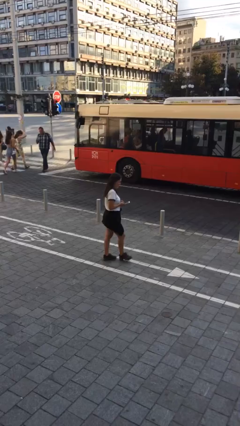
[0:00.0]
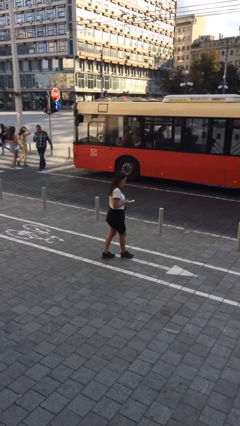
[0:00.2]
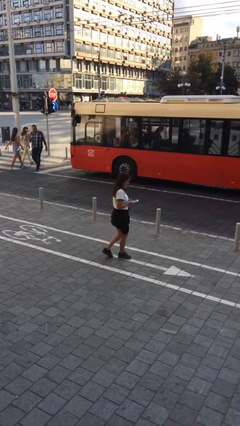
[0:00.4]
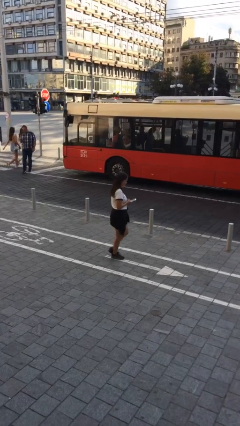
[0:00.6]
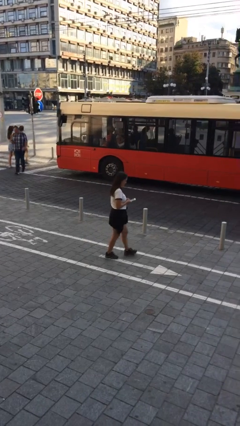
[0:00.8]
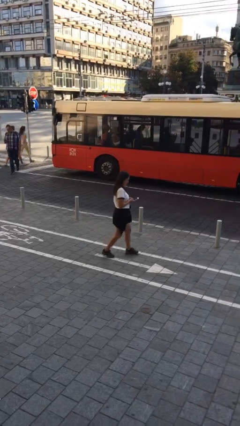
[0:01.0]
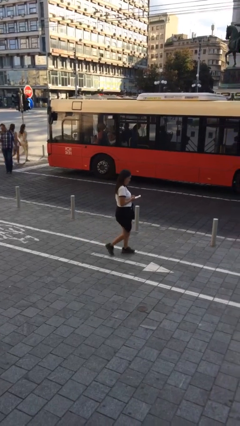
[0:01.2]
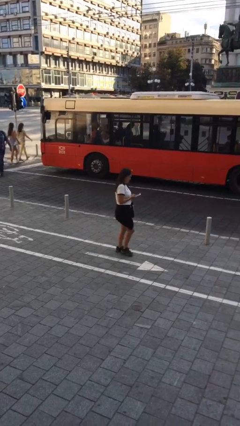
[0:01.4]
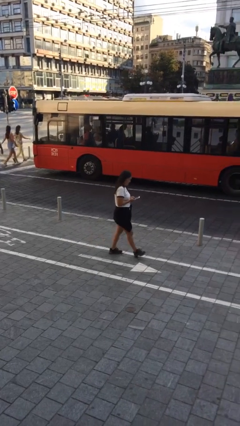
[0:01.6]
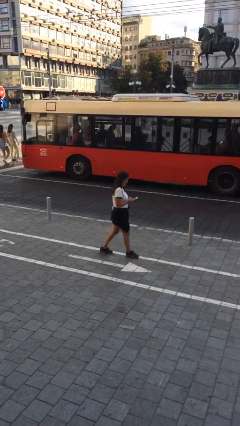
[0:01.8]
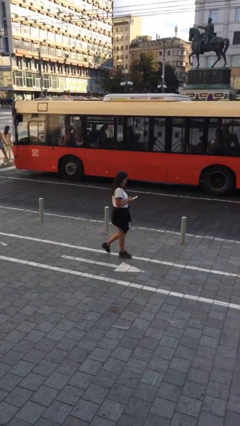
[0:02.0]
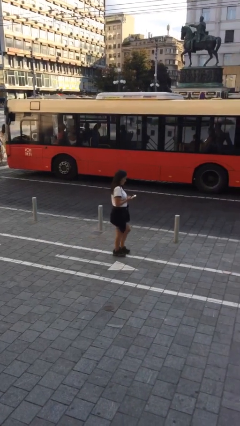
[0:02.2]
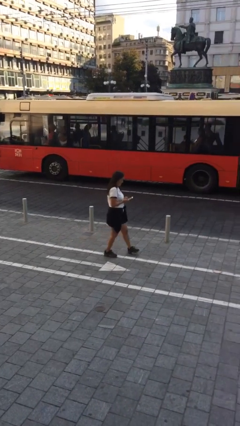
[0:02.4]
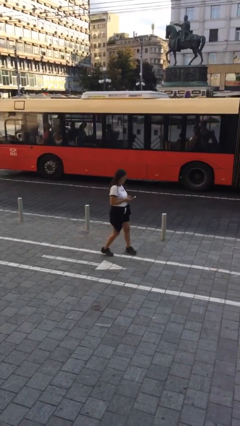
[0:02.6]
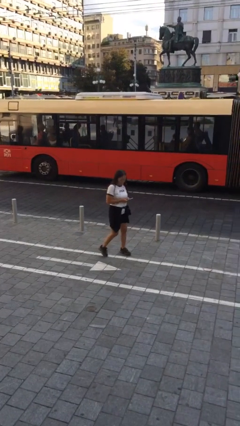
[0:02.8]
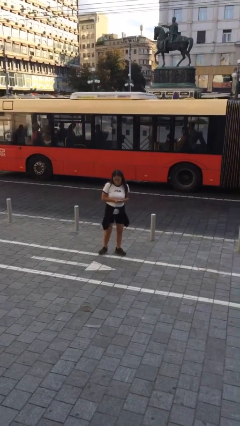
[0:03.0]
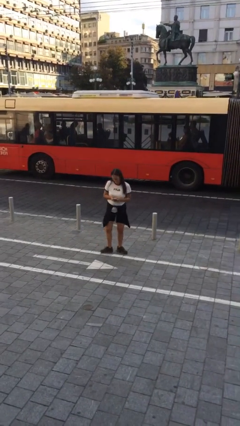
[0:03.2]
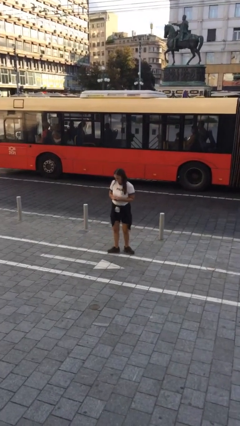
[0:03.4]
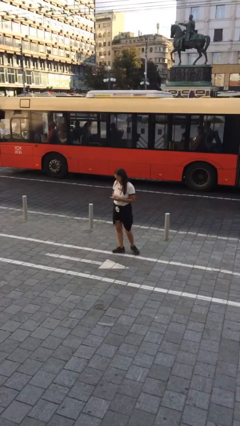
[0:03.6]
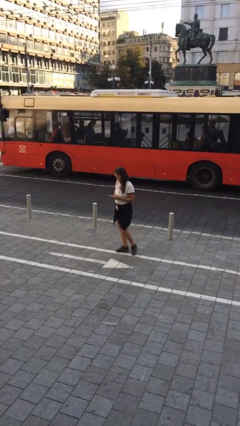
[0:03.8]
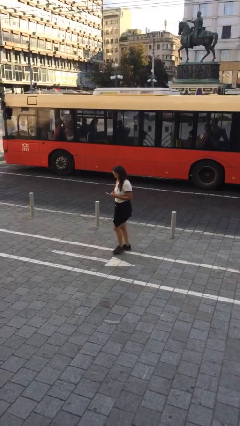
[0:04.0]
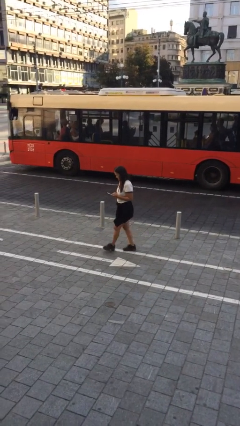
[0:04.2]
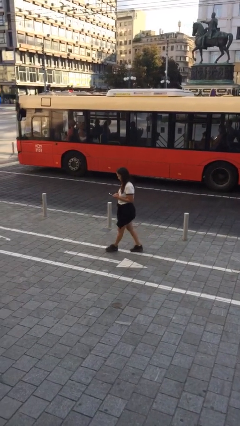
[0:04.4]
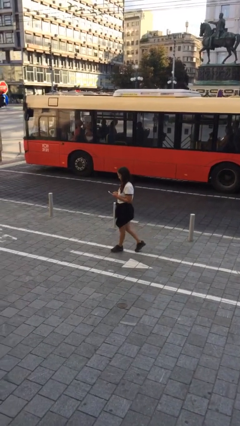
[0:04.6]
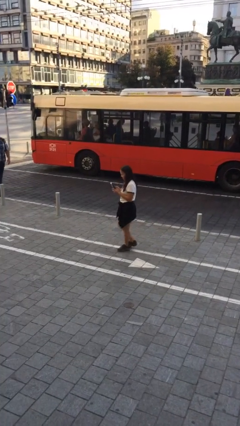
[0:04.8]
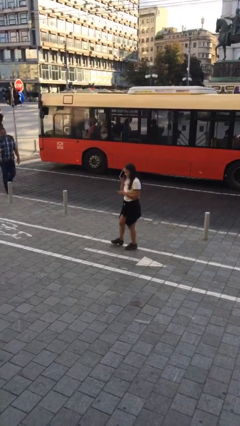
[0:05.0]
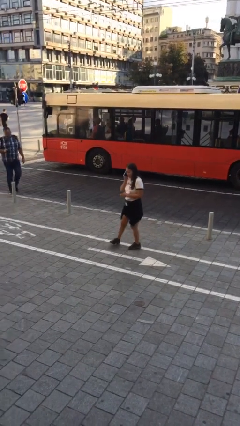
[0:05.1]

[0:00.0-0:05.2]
person texts on phone

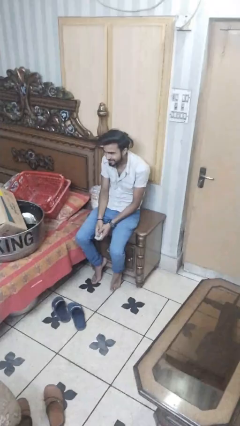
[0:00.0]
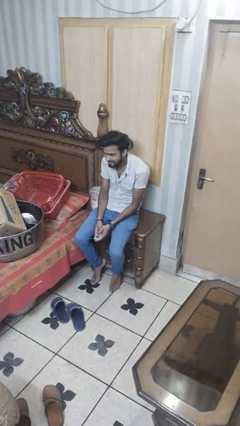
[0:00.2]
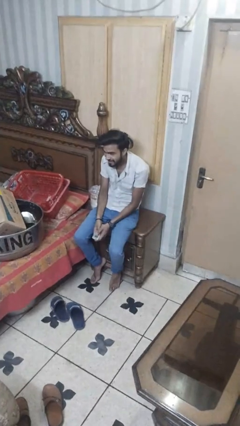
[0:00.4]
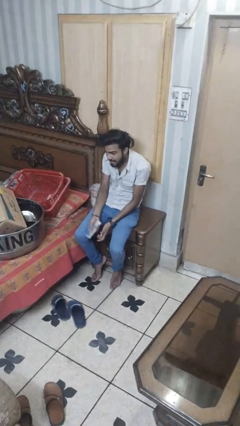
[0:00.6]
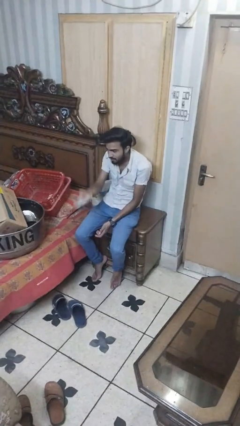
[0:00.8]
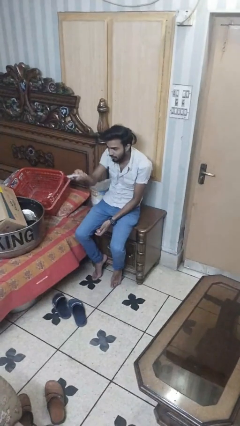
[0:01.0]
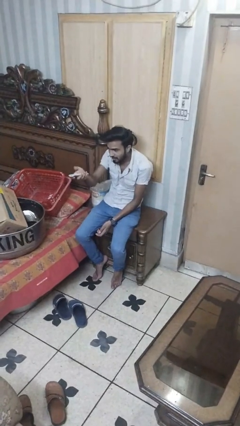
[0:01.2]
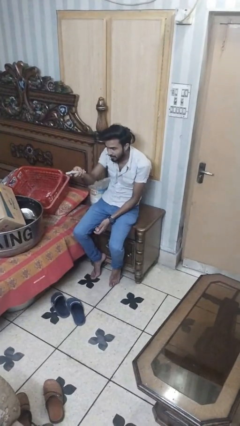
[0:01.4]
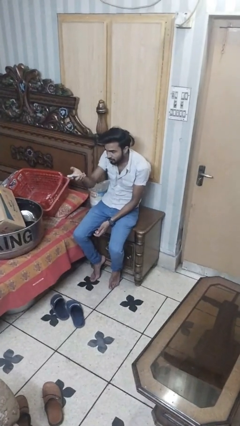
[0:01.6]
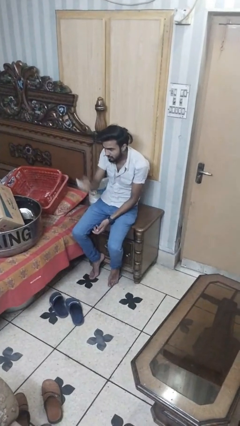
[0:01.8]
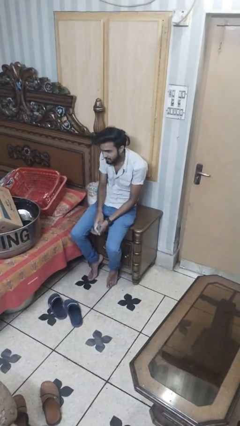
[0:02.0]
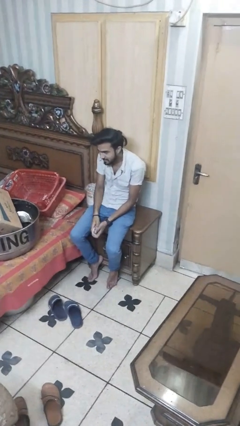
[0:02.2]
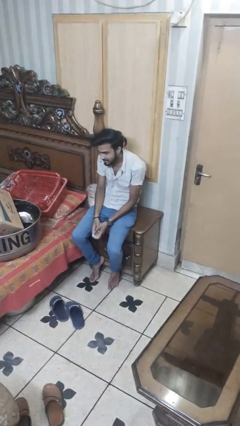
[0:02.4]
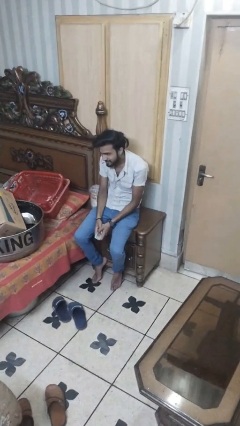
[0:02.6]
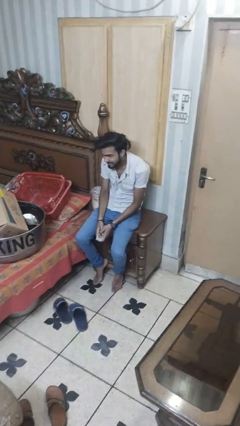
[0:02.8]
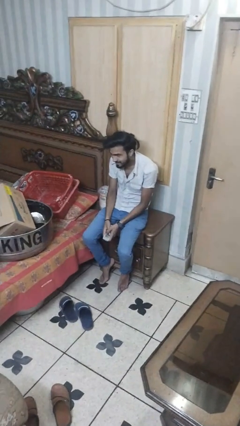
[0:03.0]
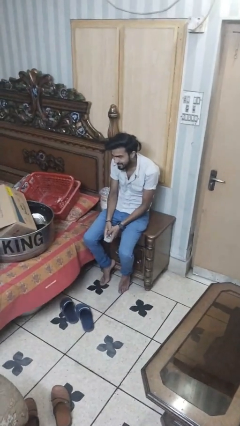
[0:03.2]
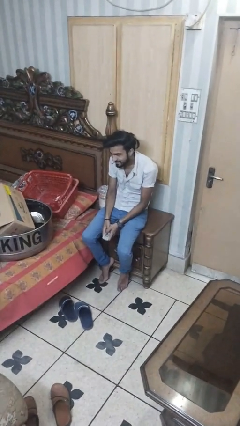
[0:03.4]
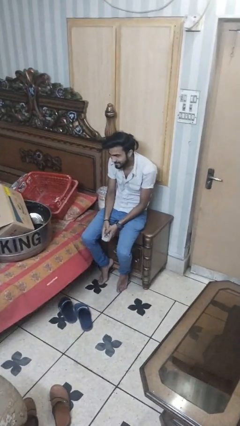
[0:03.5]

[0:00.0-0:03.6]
person uses television remote

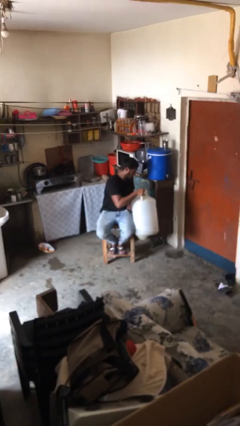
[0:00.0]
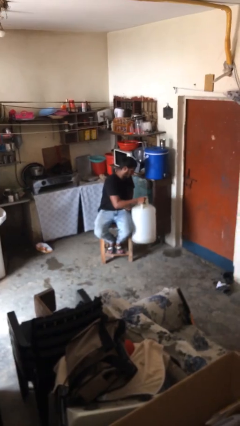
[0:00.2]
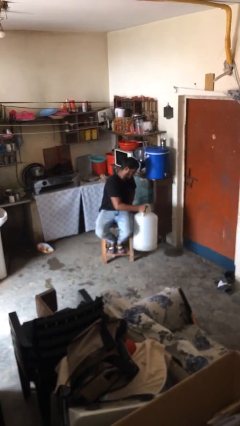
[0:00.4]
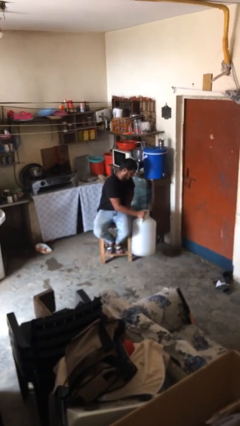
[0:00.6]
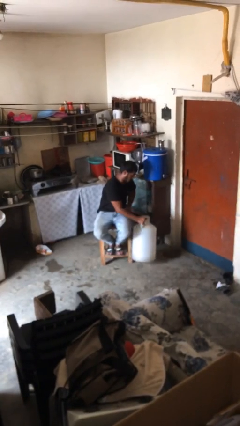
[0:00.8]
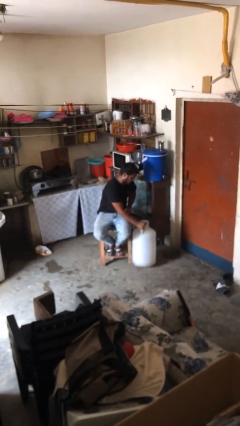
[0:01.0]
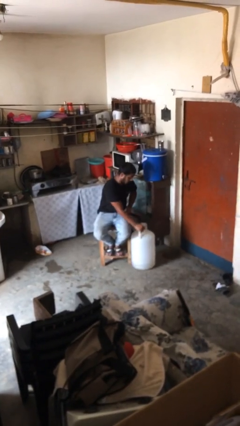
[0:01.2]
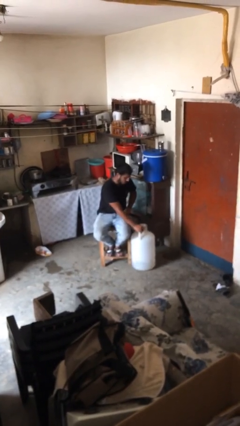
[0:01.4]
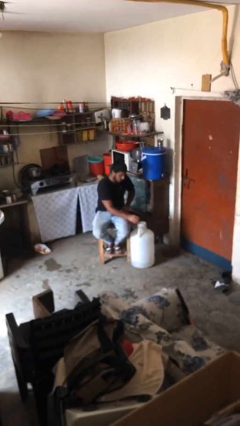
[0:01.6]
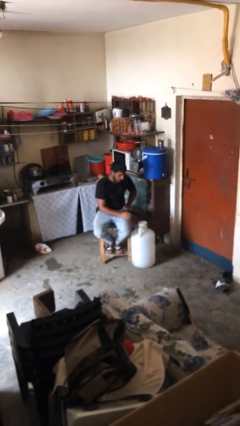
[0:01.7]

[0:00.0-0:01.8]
person puts down object on floor

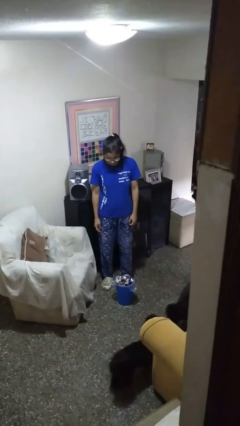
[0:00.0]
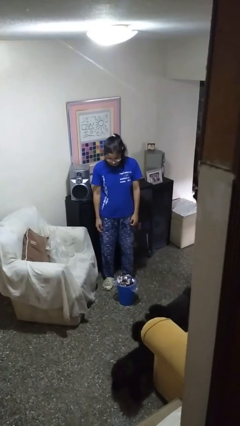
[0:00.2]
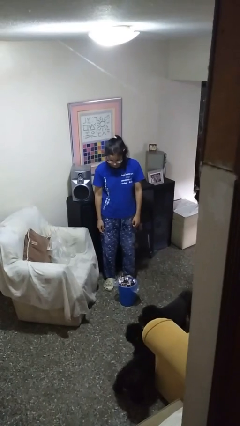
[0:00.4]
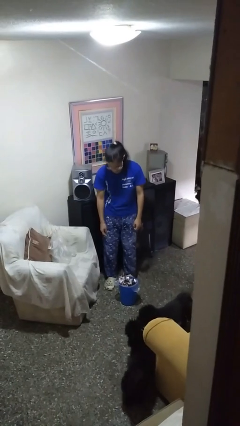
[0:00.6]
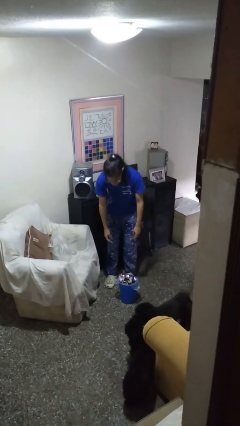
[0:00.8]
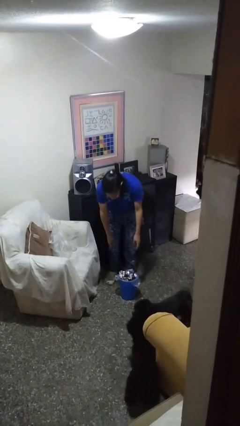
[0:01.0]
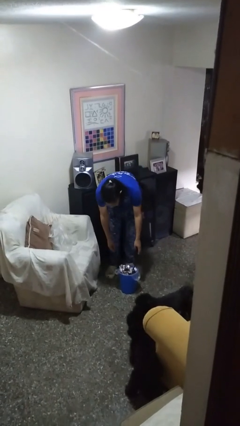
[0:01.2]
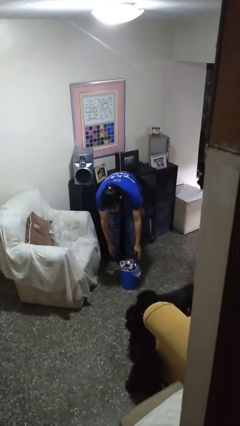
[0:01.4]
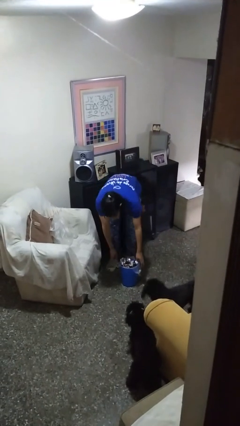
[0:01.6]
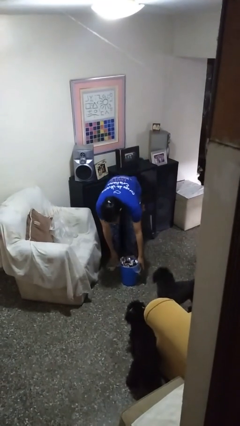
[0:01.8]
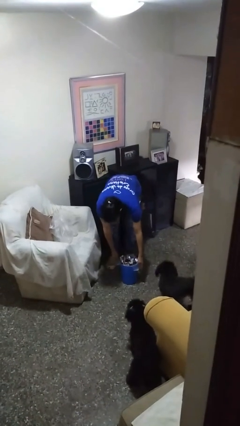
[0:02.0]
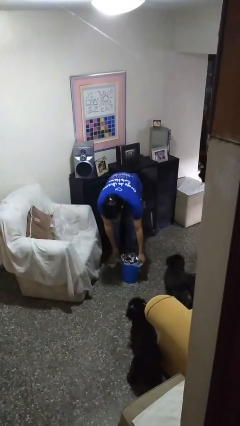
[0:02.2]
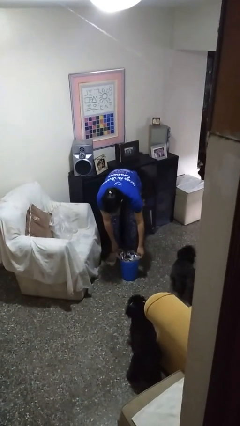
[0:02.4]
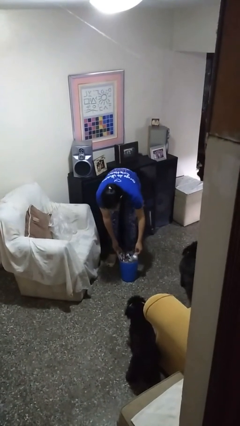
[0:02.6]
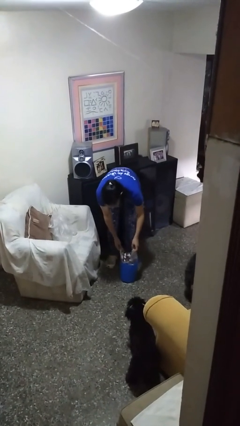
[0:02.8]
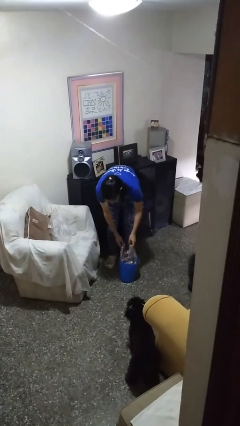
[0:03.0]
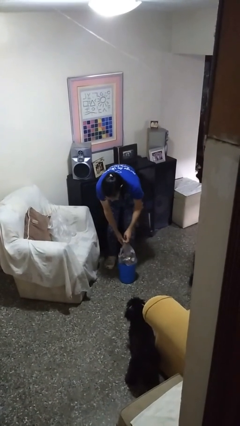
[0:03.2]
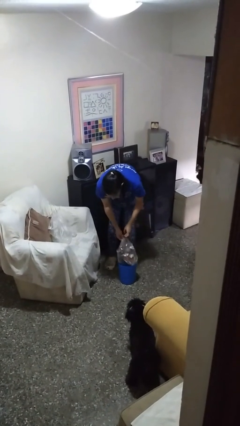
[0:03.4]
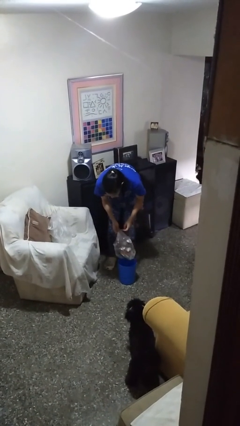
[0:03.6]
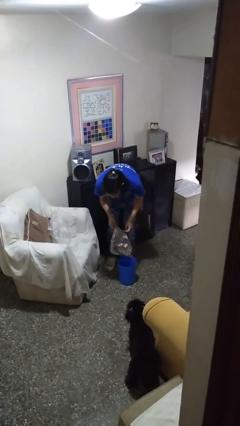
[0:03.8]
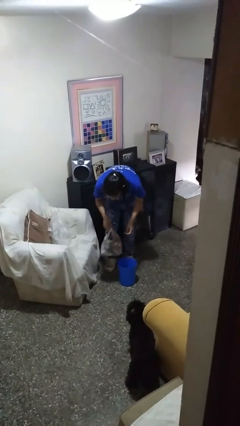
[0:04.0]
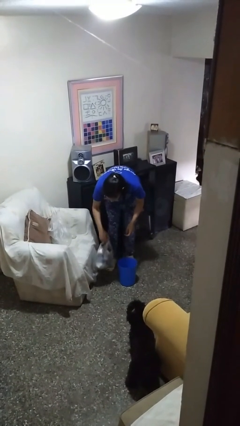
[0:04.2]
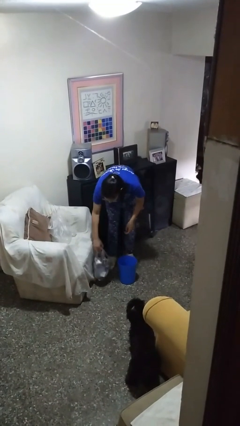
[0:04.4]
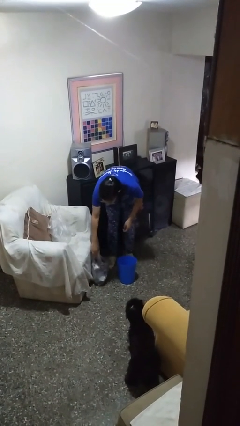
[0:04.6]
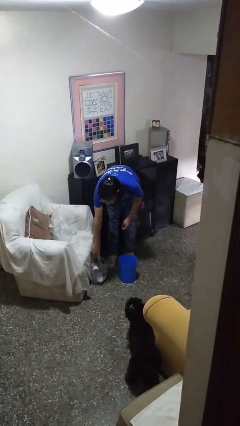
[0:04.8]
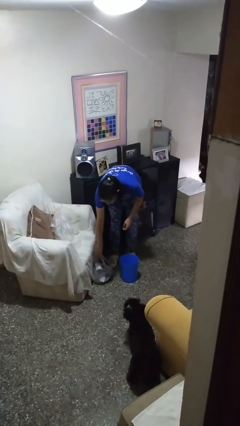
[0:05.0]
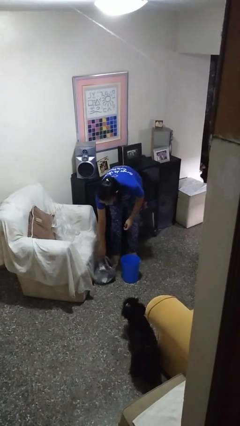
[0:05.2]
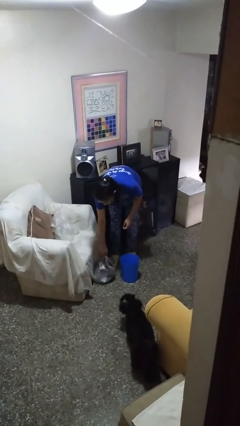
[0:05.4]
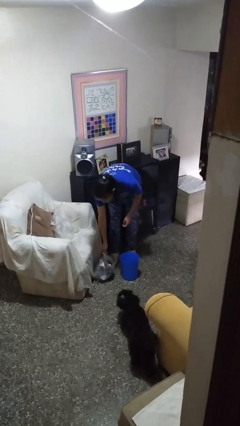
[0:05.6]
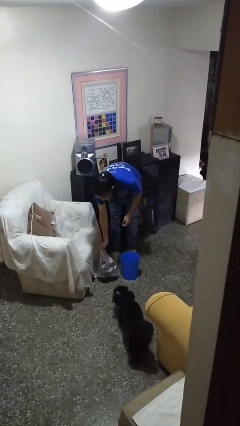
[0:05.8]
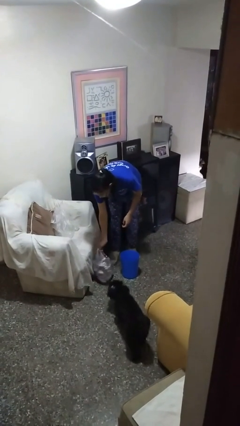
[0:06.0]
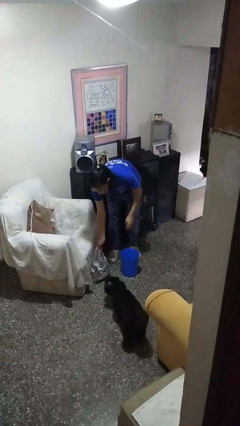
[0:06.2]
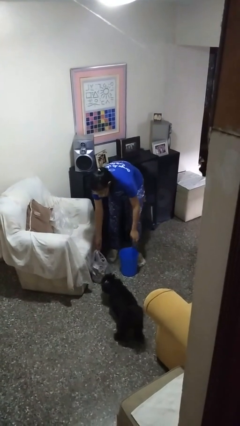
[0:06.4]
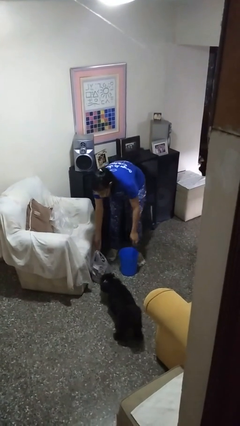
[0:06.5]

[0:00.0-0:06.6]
person removes trashbag from trashcan

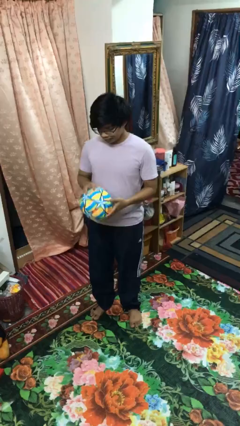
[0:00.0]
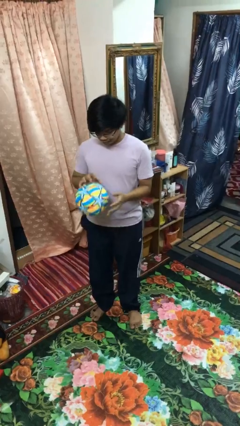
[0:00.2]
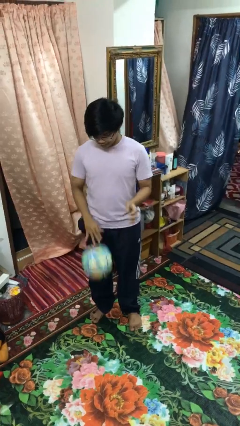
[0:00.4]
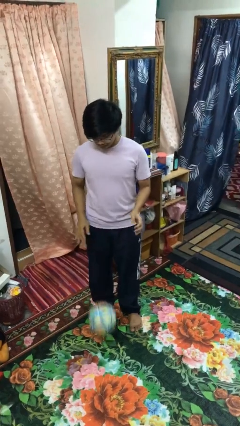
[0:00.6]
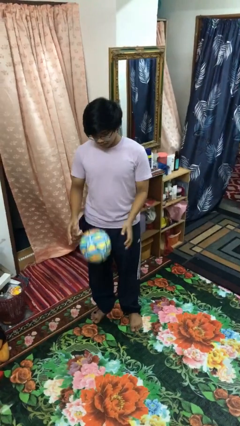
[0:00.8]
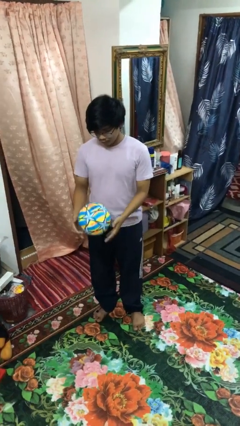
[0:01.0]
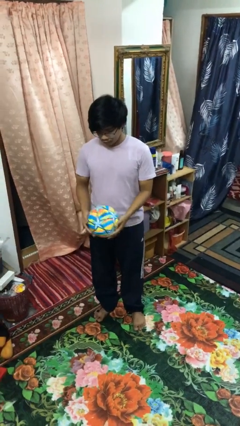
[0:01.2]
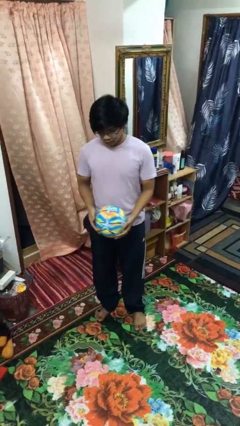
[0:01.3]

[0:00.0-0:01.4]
person bounces ball on floor
